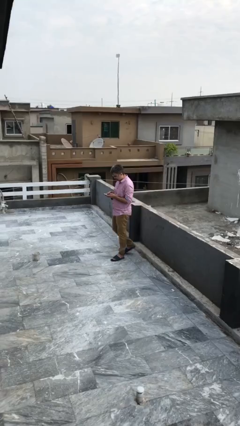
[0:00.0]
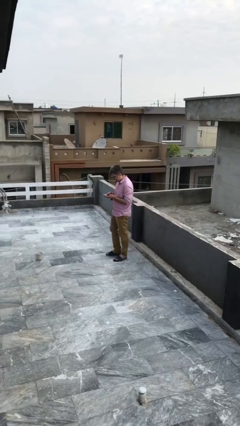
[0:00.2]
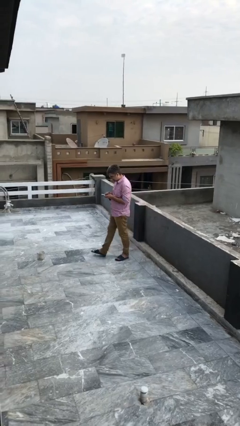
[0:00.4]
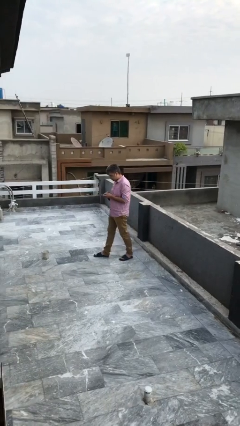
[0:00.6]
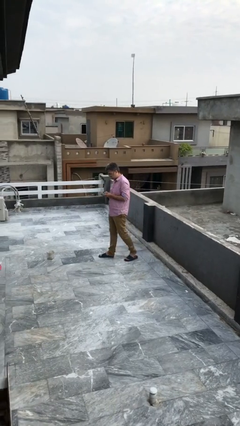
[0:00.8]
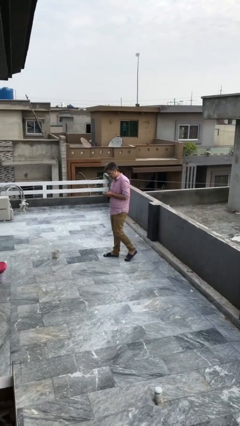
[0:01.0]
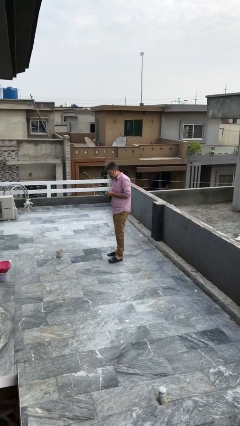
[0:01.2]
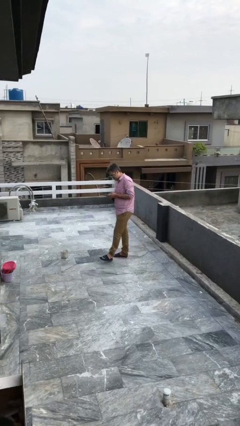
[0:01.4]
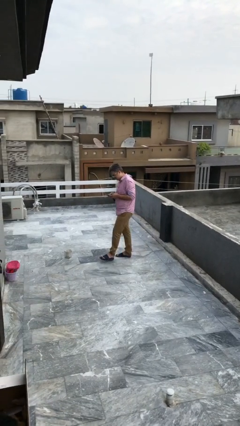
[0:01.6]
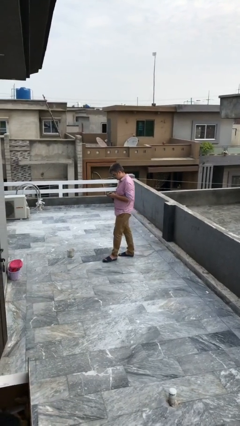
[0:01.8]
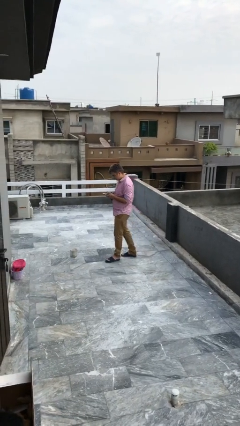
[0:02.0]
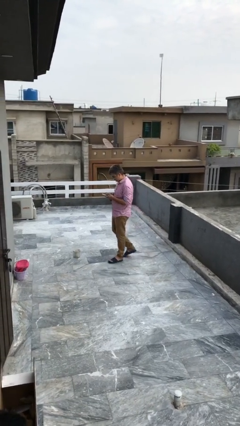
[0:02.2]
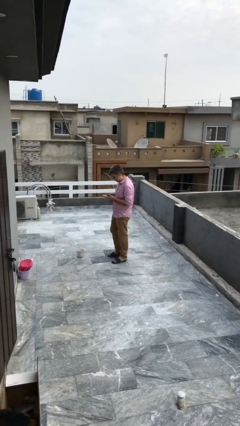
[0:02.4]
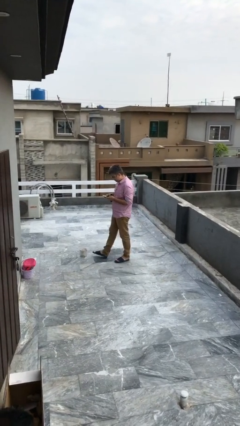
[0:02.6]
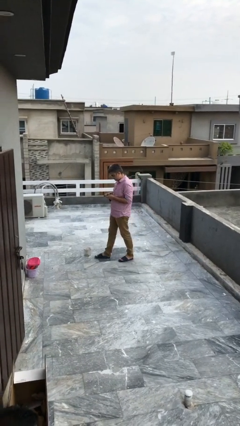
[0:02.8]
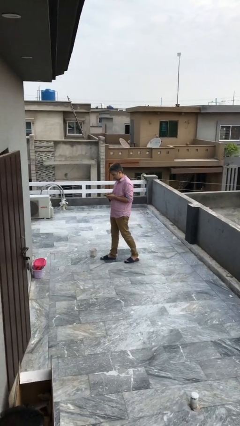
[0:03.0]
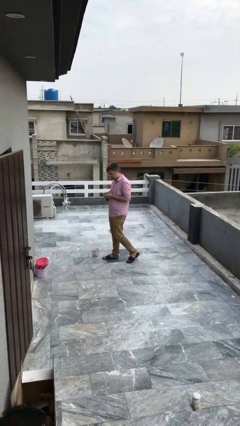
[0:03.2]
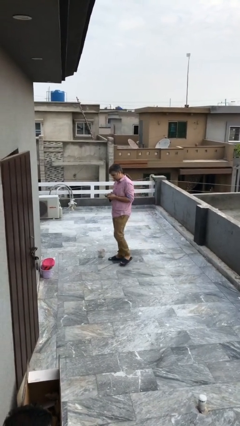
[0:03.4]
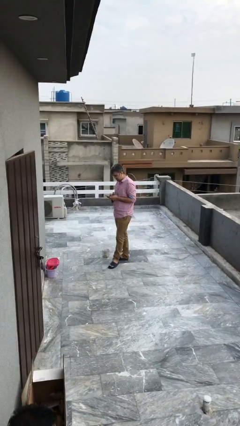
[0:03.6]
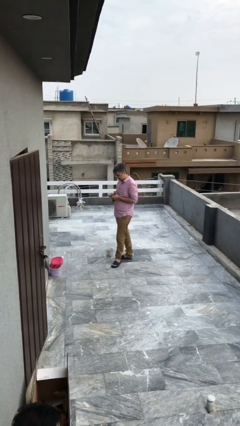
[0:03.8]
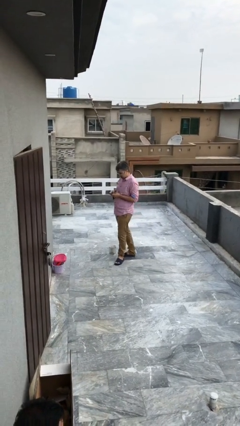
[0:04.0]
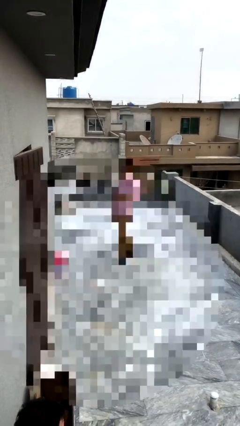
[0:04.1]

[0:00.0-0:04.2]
person texts on phone

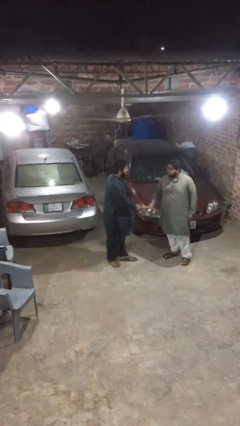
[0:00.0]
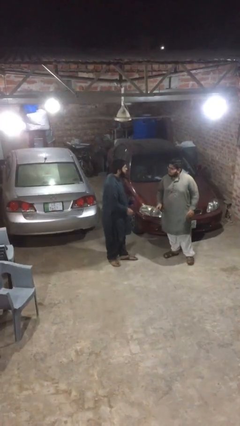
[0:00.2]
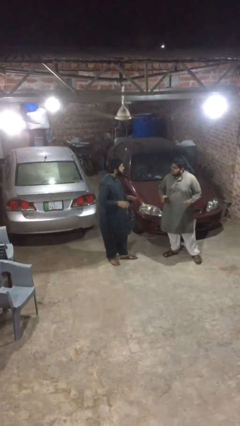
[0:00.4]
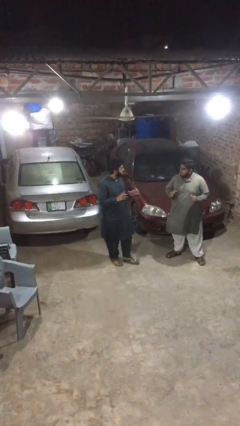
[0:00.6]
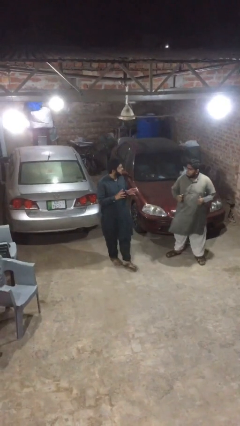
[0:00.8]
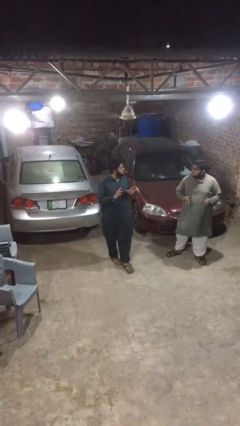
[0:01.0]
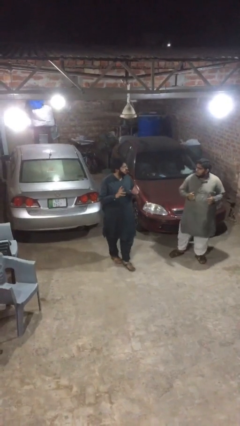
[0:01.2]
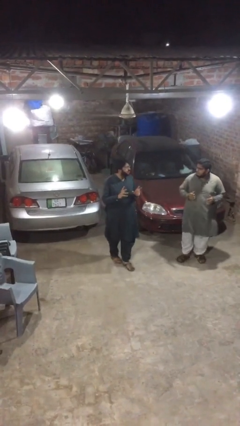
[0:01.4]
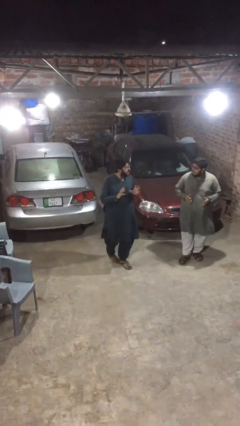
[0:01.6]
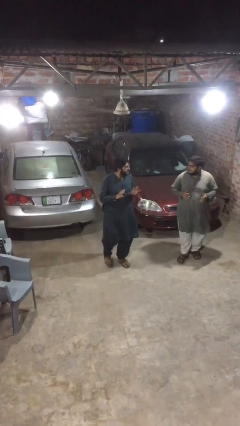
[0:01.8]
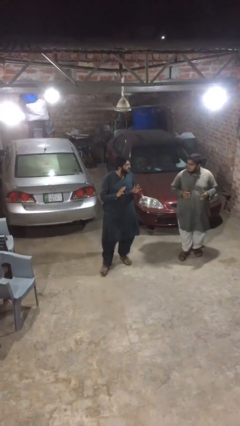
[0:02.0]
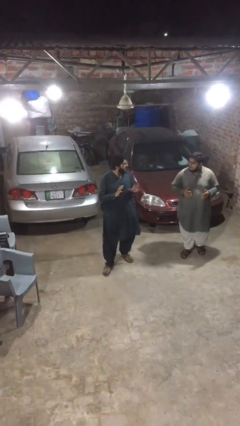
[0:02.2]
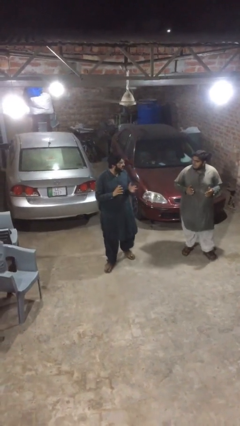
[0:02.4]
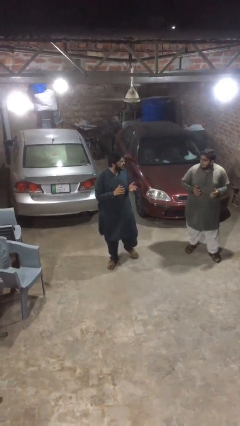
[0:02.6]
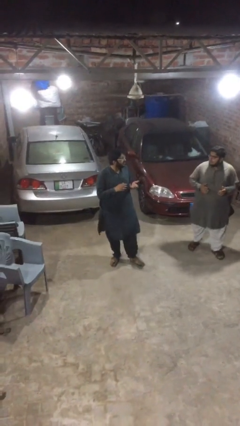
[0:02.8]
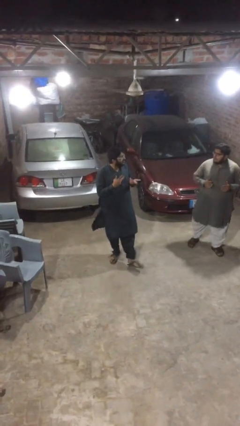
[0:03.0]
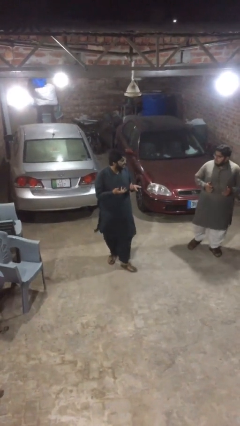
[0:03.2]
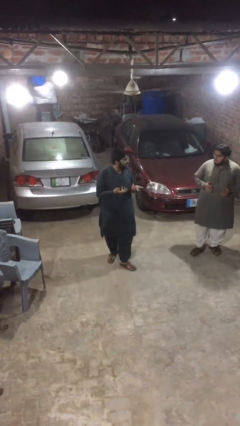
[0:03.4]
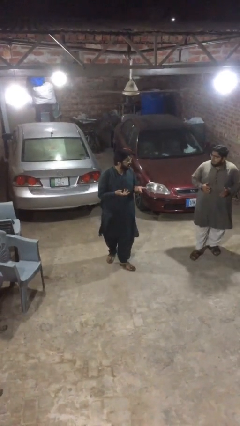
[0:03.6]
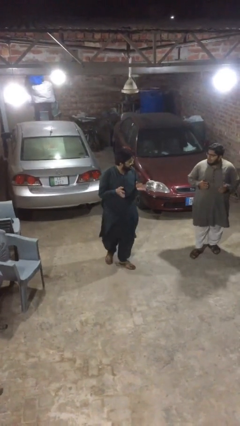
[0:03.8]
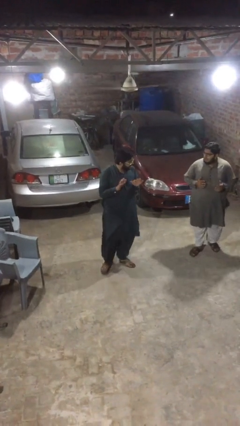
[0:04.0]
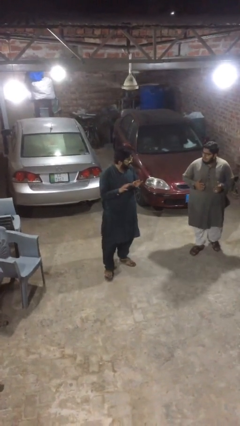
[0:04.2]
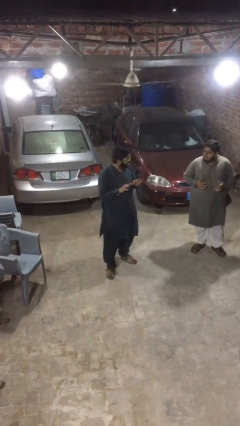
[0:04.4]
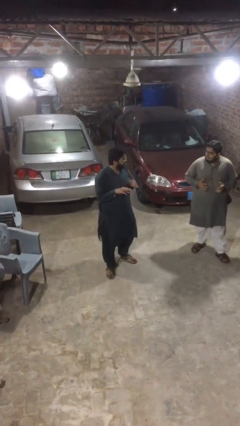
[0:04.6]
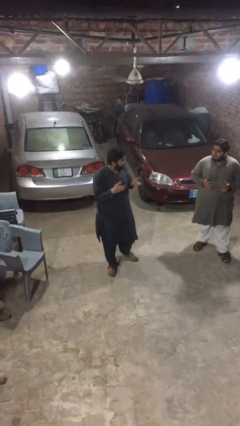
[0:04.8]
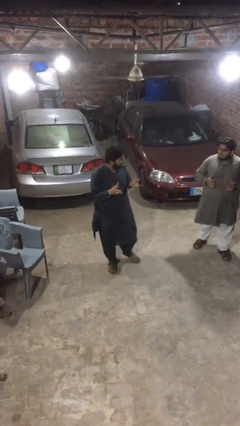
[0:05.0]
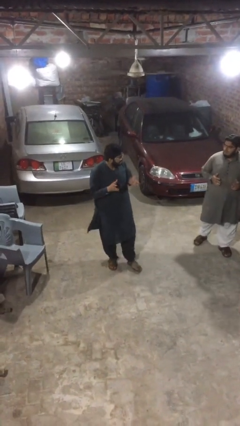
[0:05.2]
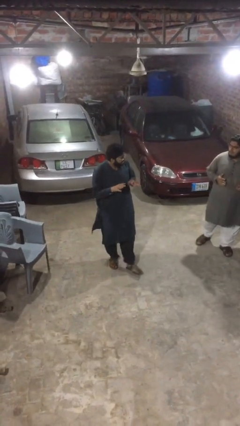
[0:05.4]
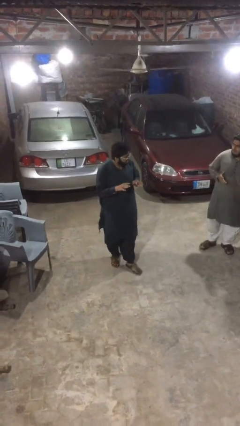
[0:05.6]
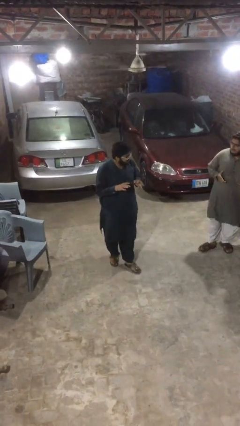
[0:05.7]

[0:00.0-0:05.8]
person talks to person

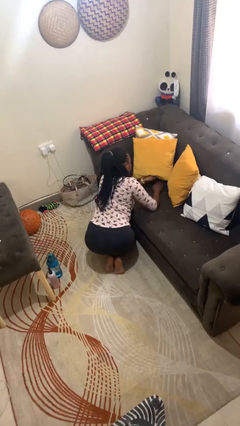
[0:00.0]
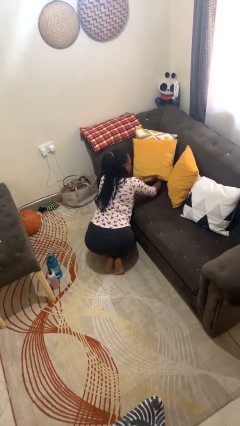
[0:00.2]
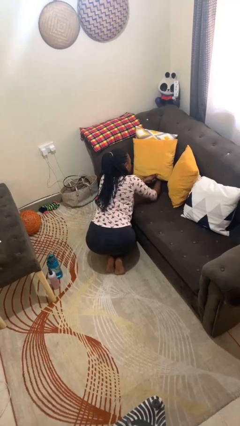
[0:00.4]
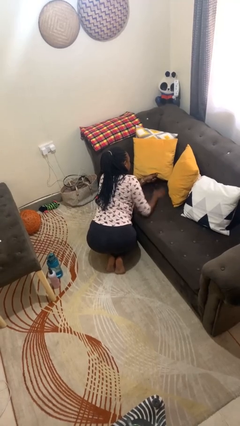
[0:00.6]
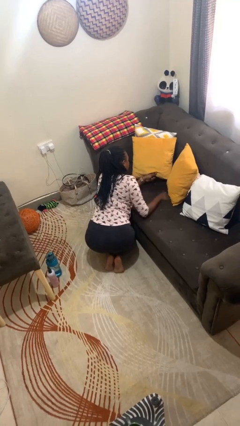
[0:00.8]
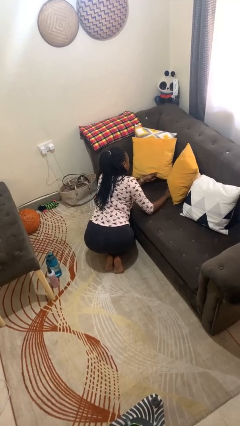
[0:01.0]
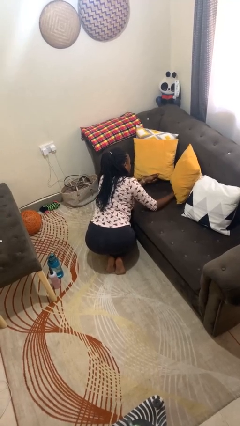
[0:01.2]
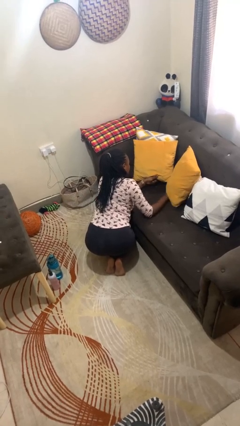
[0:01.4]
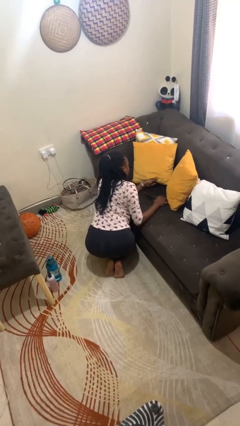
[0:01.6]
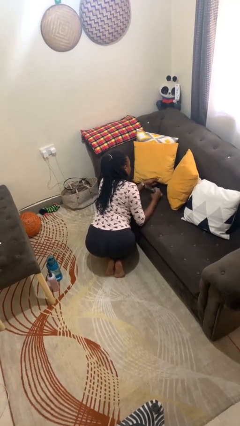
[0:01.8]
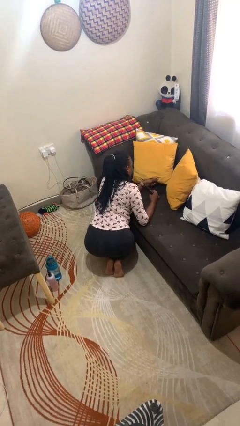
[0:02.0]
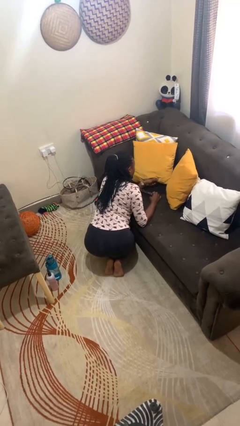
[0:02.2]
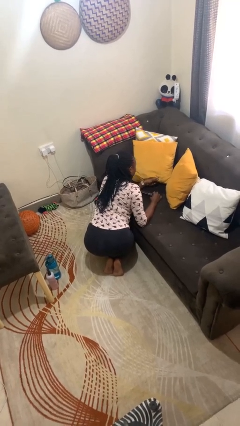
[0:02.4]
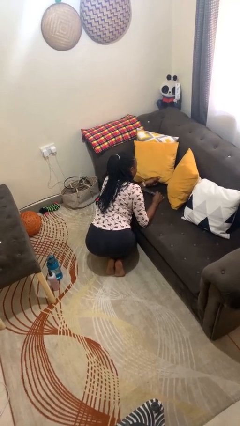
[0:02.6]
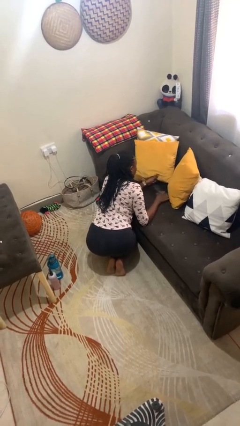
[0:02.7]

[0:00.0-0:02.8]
person searches in couch

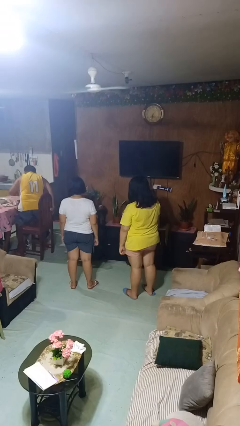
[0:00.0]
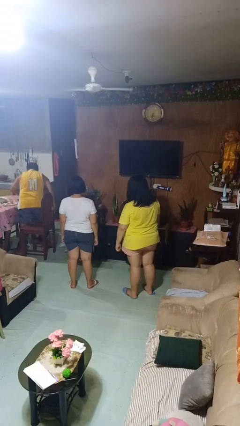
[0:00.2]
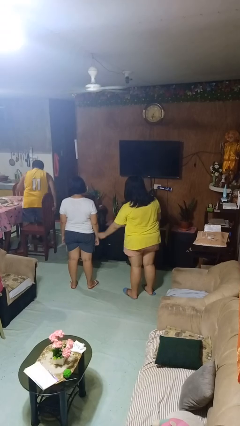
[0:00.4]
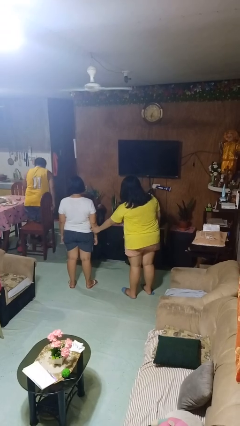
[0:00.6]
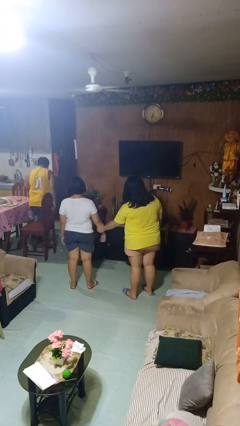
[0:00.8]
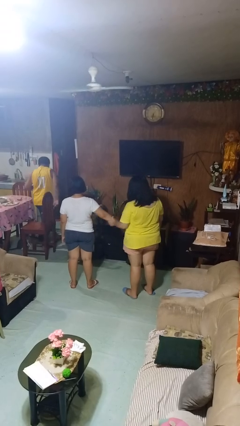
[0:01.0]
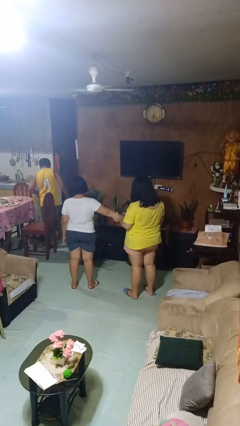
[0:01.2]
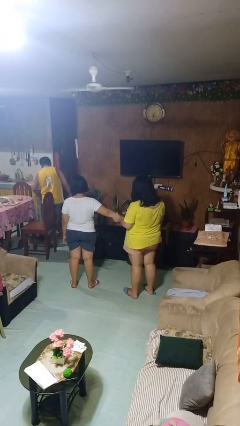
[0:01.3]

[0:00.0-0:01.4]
person grabs person by forearm

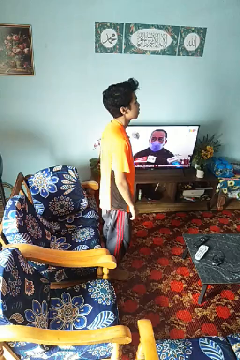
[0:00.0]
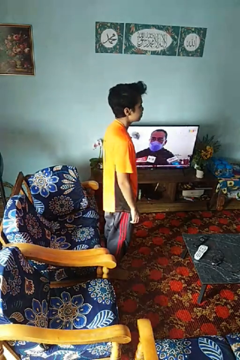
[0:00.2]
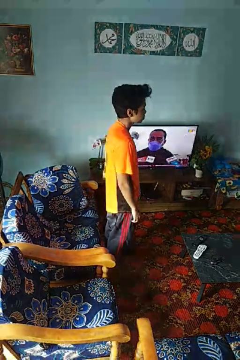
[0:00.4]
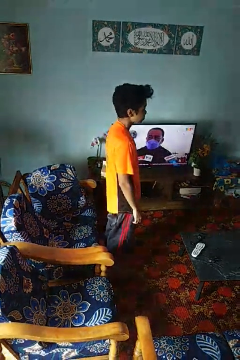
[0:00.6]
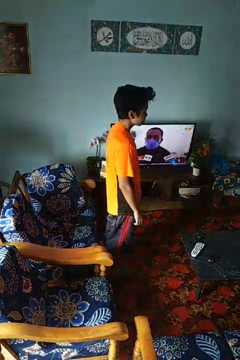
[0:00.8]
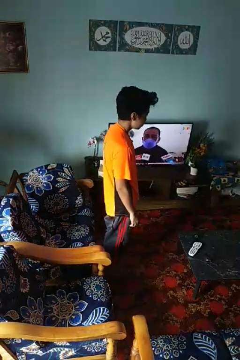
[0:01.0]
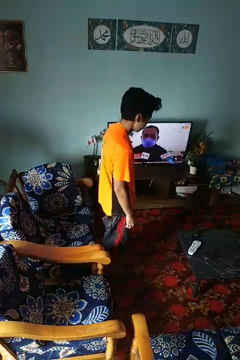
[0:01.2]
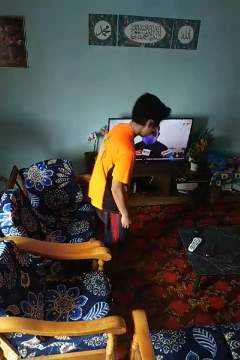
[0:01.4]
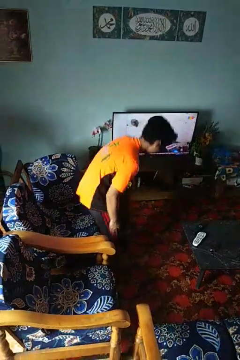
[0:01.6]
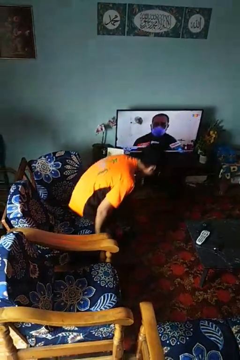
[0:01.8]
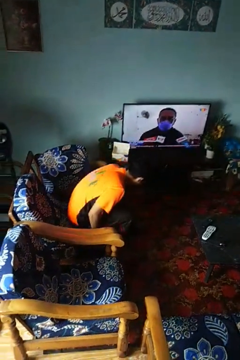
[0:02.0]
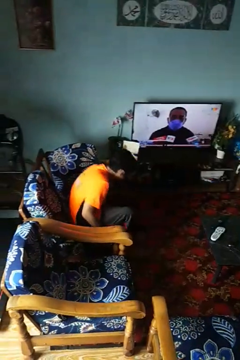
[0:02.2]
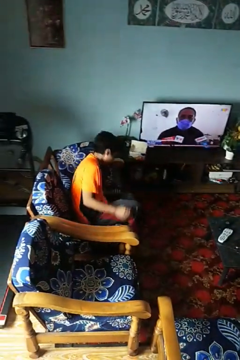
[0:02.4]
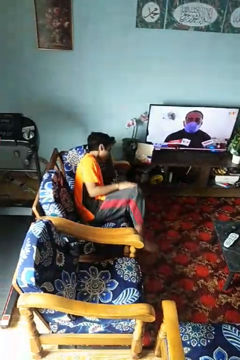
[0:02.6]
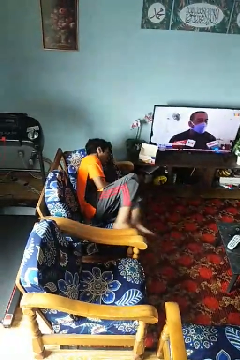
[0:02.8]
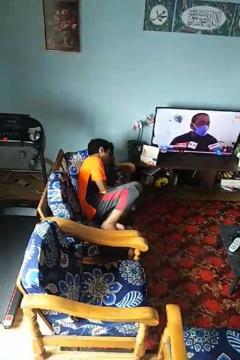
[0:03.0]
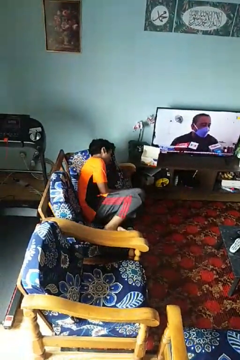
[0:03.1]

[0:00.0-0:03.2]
person lies down on couch

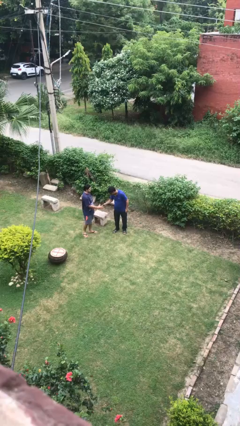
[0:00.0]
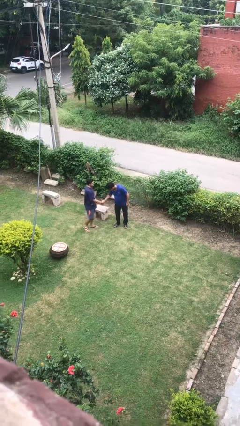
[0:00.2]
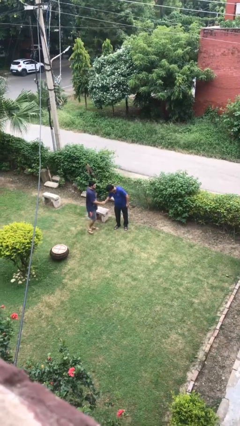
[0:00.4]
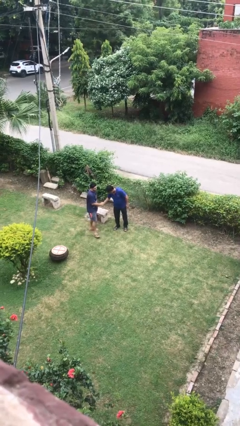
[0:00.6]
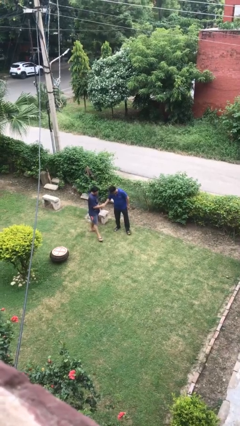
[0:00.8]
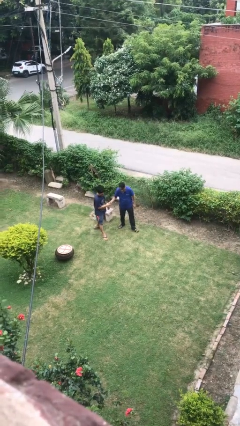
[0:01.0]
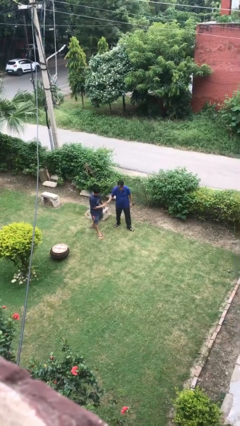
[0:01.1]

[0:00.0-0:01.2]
person shakes hand
